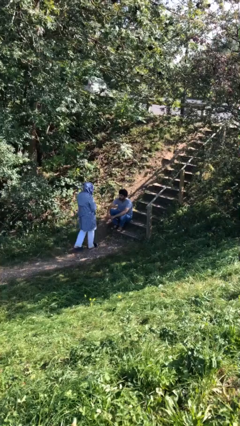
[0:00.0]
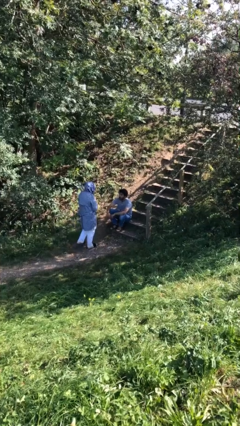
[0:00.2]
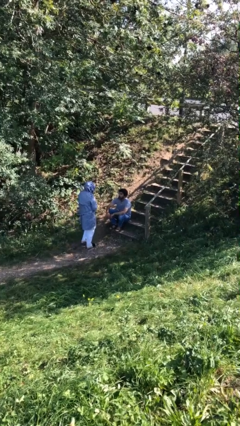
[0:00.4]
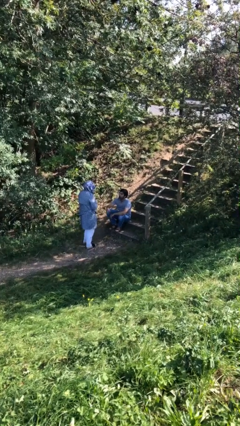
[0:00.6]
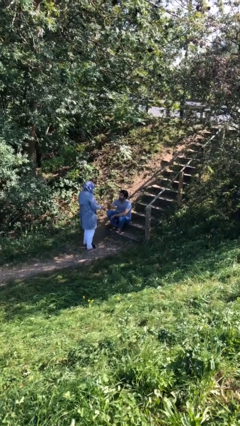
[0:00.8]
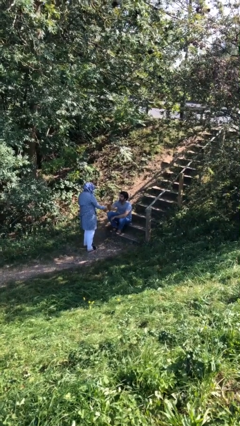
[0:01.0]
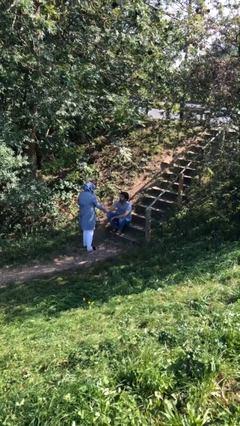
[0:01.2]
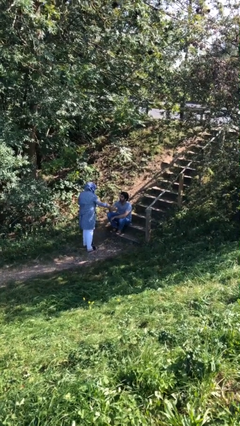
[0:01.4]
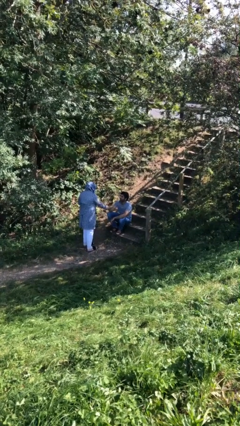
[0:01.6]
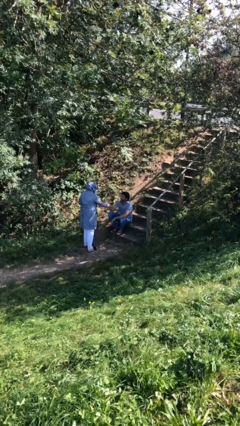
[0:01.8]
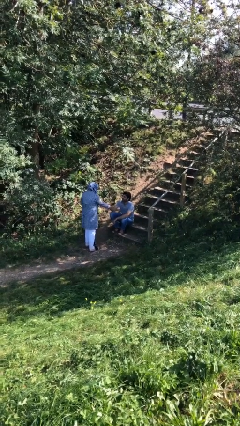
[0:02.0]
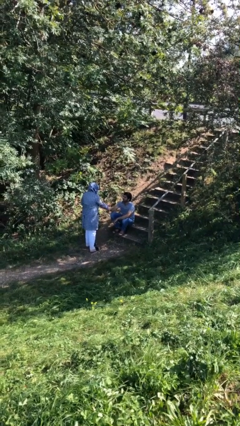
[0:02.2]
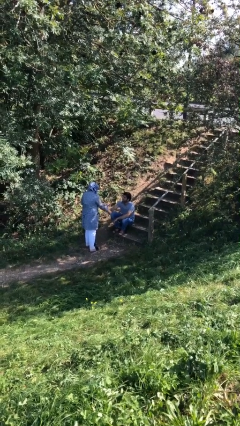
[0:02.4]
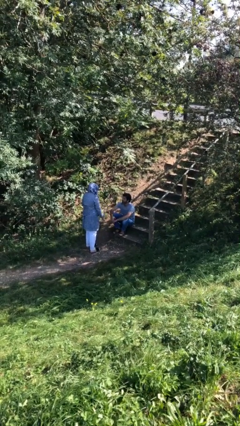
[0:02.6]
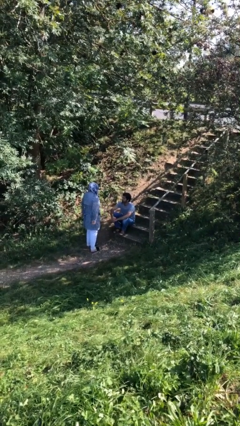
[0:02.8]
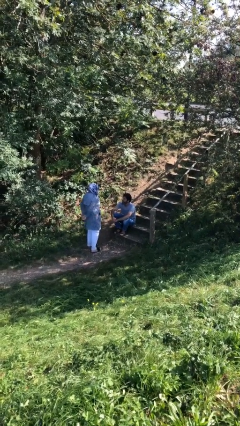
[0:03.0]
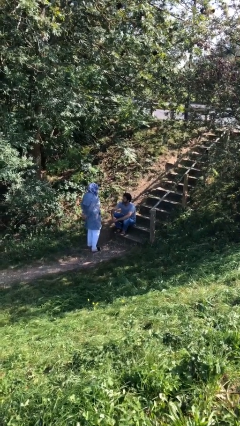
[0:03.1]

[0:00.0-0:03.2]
person shakes hand

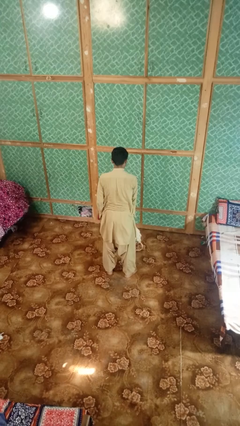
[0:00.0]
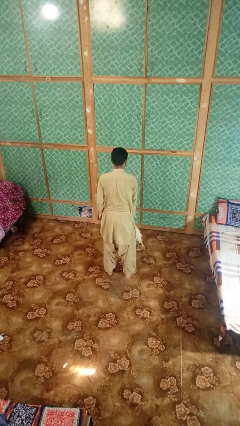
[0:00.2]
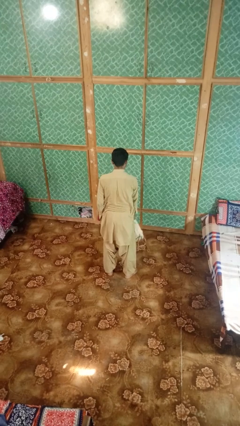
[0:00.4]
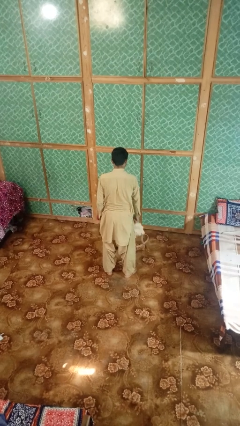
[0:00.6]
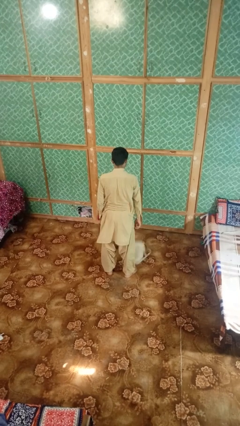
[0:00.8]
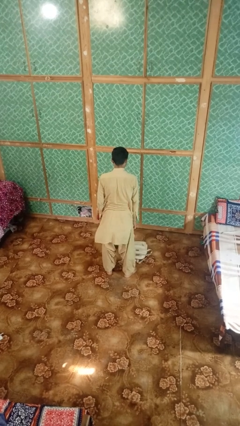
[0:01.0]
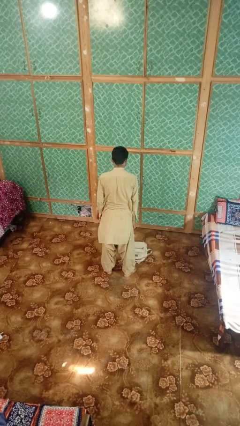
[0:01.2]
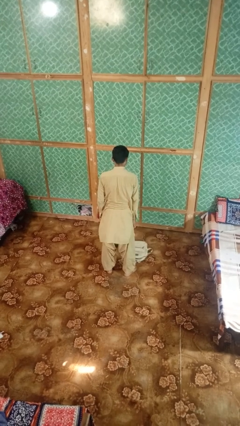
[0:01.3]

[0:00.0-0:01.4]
person throws object to ground

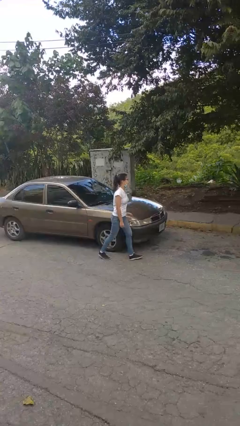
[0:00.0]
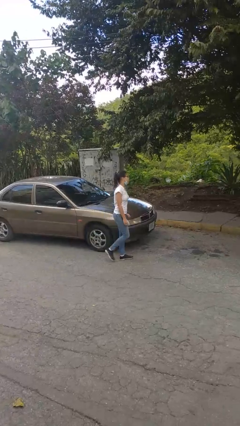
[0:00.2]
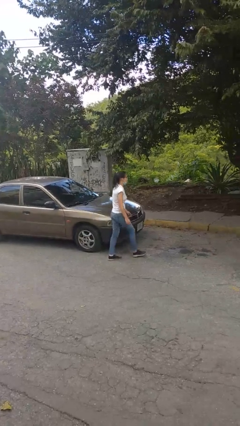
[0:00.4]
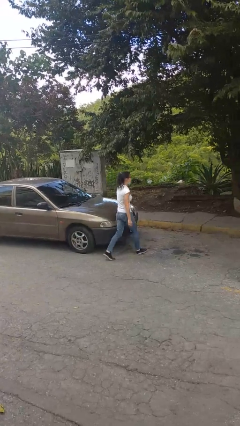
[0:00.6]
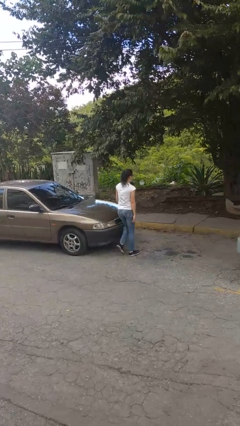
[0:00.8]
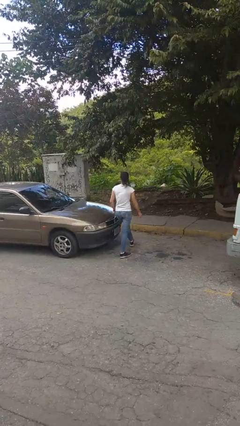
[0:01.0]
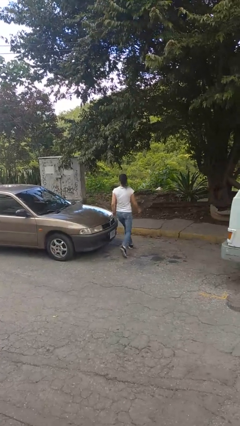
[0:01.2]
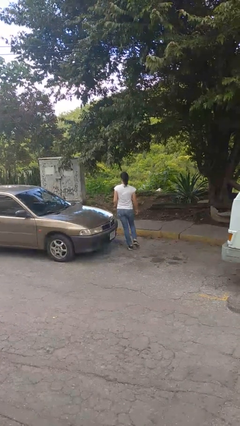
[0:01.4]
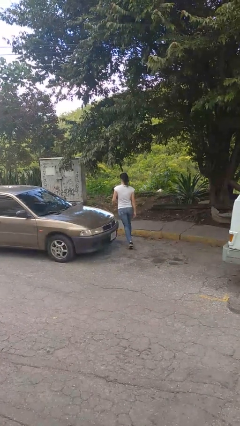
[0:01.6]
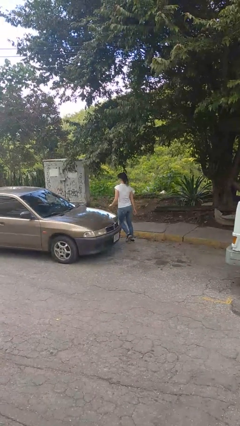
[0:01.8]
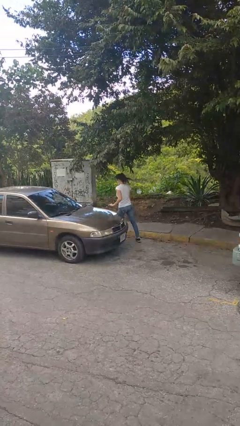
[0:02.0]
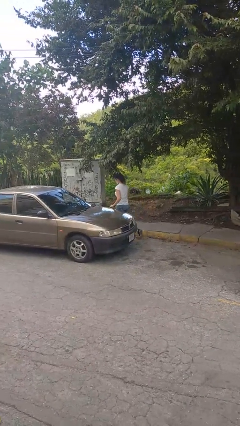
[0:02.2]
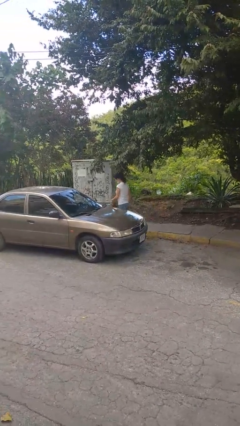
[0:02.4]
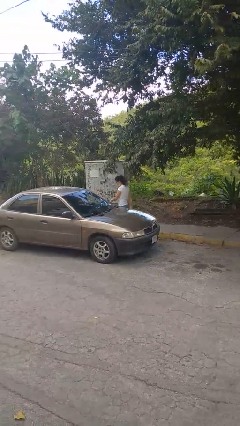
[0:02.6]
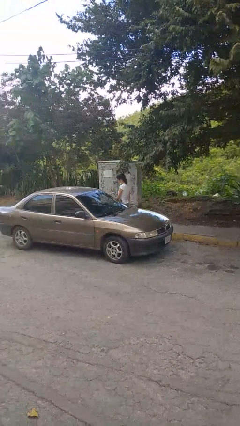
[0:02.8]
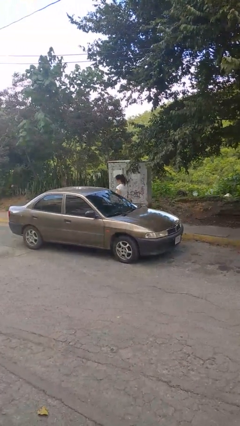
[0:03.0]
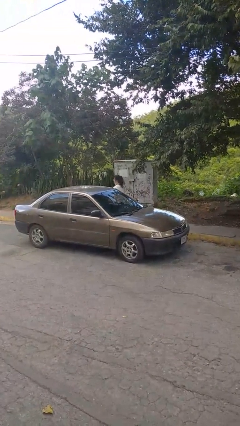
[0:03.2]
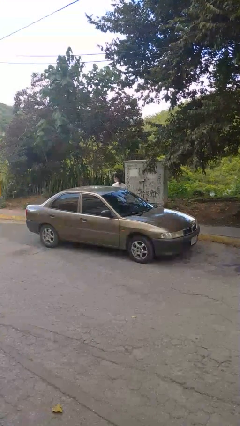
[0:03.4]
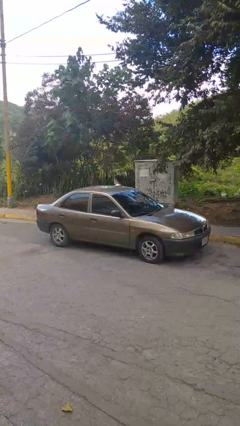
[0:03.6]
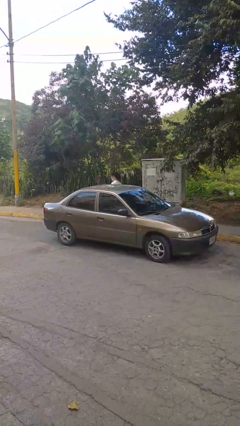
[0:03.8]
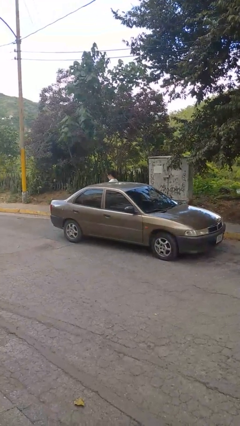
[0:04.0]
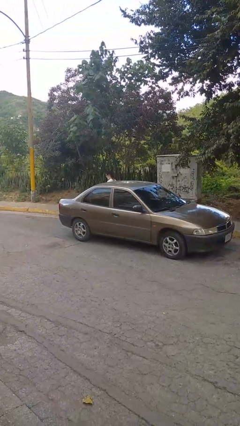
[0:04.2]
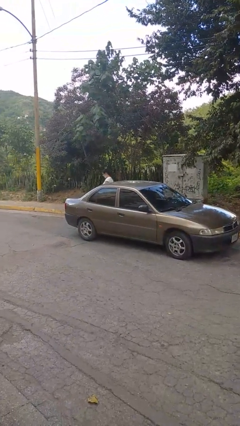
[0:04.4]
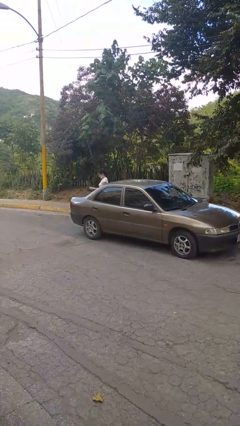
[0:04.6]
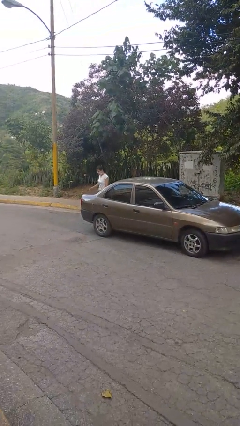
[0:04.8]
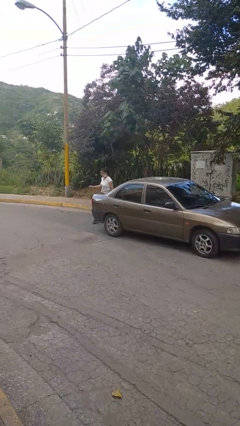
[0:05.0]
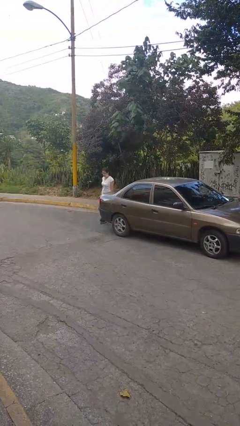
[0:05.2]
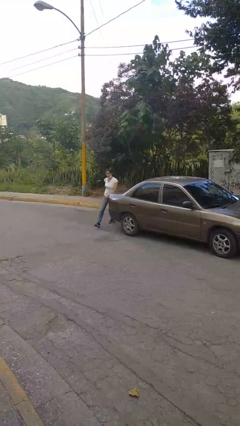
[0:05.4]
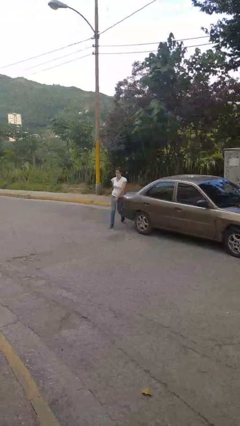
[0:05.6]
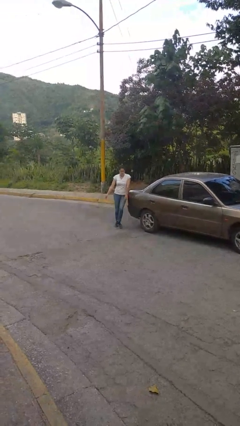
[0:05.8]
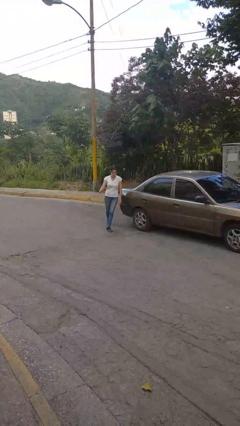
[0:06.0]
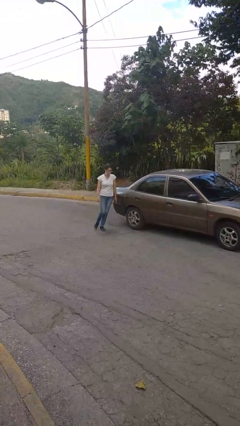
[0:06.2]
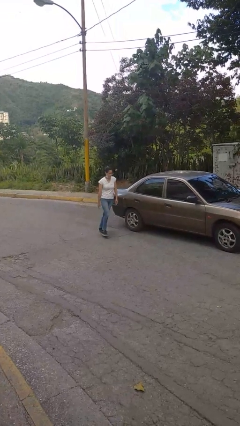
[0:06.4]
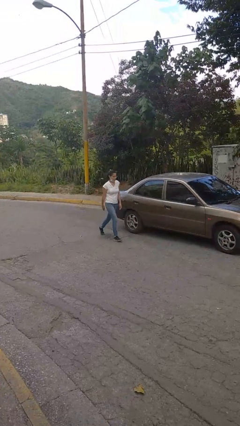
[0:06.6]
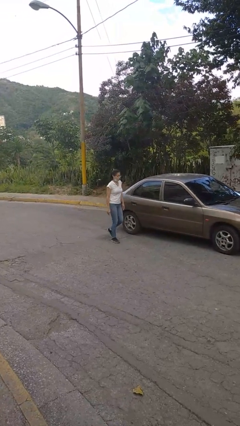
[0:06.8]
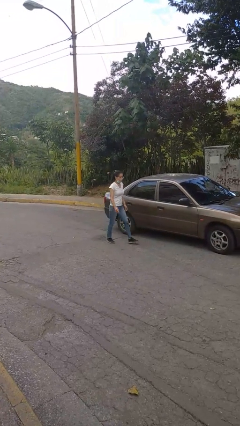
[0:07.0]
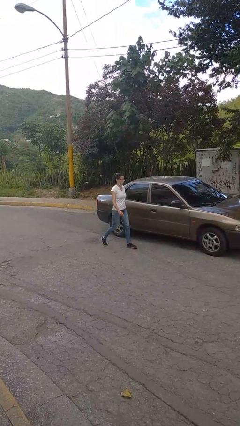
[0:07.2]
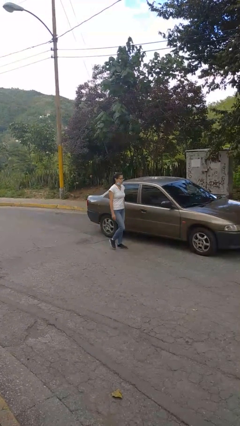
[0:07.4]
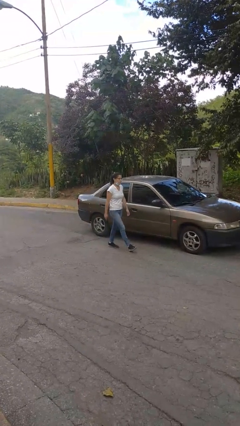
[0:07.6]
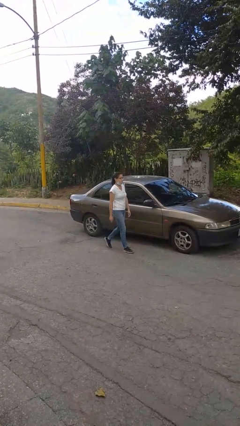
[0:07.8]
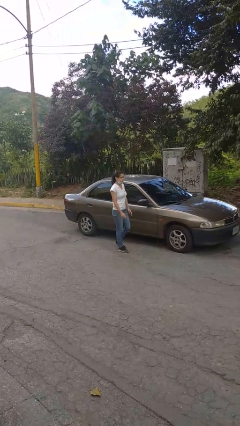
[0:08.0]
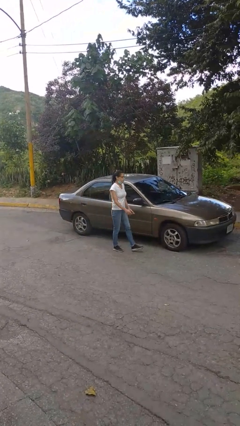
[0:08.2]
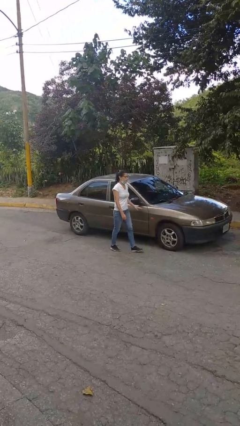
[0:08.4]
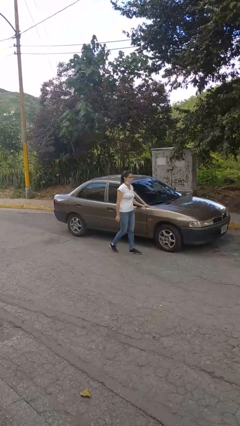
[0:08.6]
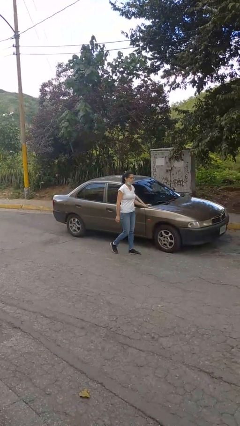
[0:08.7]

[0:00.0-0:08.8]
person walks around car

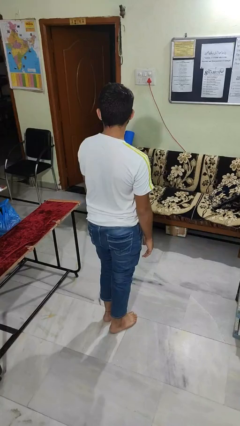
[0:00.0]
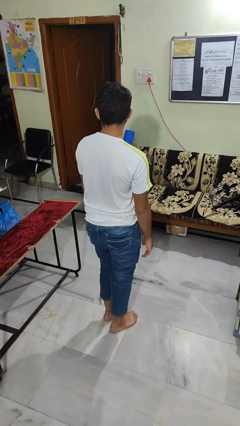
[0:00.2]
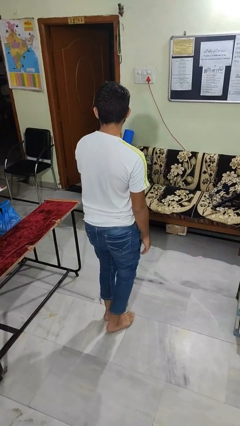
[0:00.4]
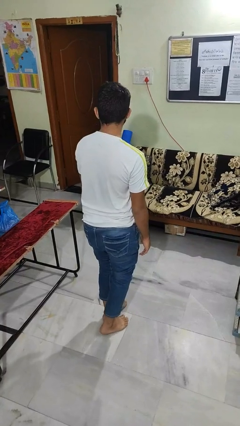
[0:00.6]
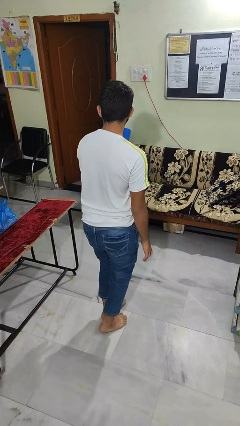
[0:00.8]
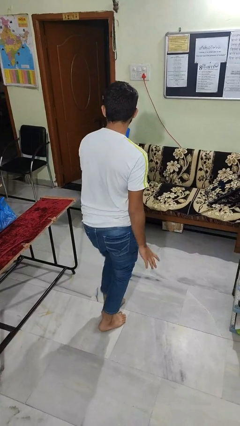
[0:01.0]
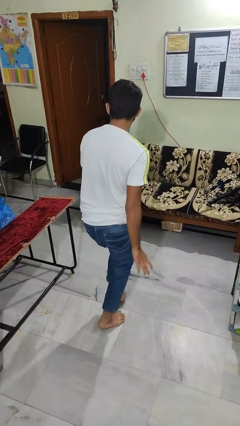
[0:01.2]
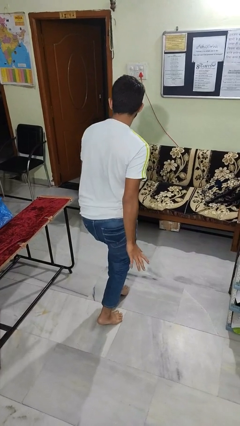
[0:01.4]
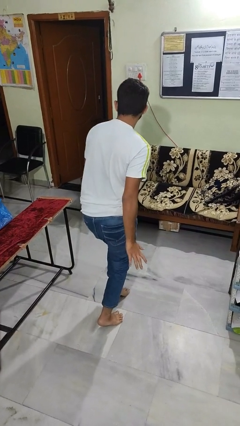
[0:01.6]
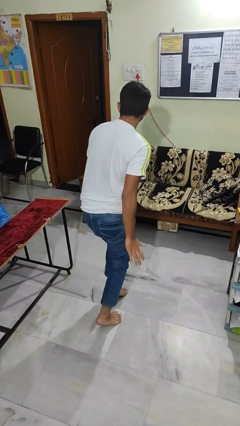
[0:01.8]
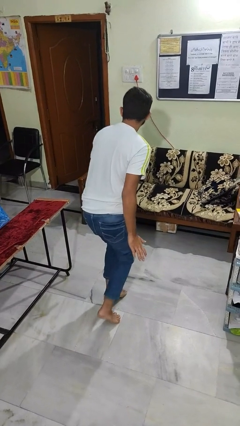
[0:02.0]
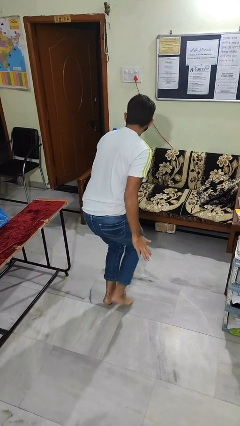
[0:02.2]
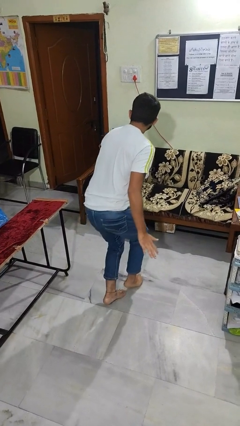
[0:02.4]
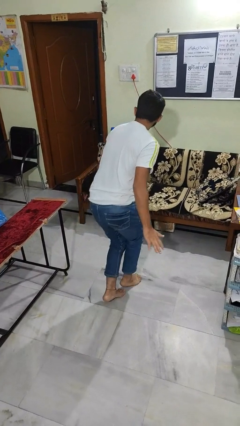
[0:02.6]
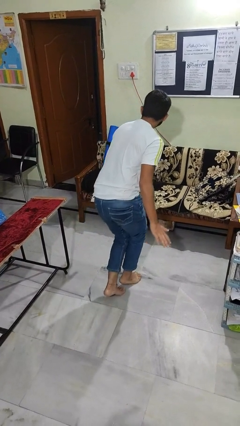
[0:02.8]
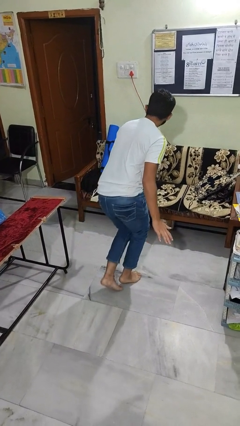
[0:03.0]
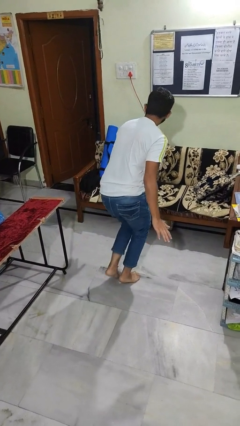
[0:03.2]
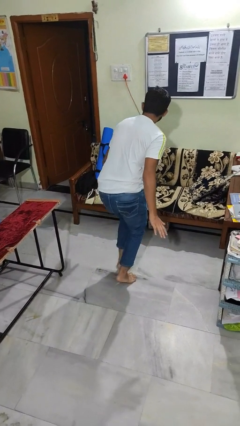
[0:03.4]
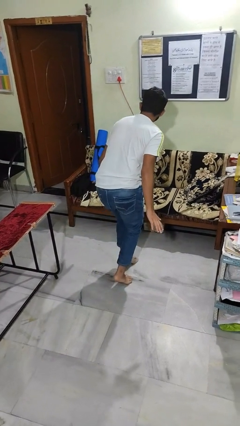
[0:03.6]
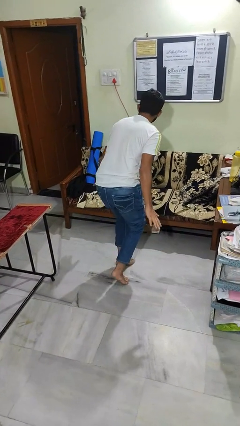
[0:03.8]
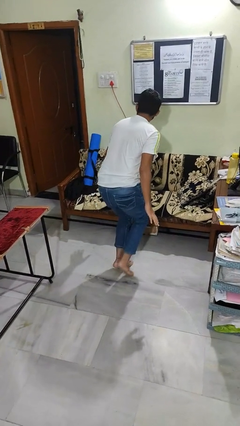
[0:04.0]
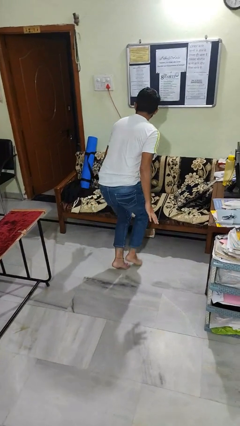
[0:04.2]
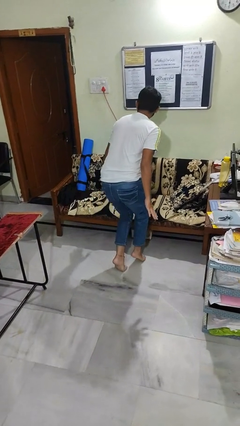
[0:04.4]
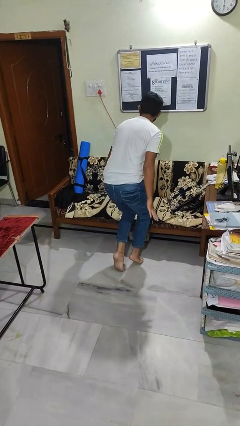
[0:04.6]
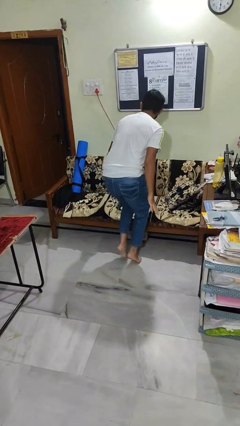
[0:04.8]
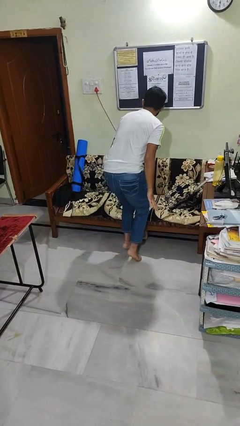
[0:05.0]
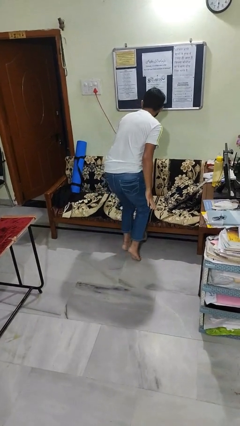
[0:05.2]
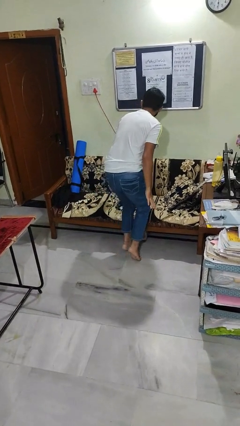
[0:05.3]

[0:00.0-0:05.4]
person walks tiptoe
